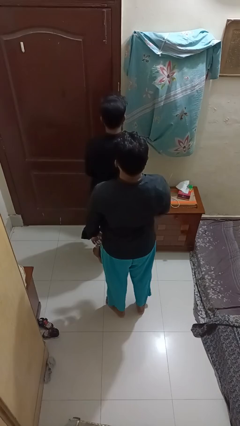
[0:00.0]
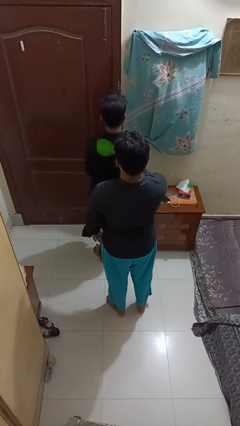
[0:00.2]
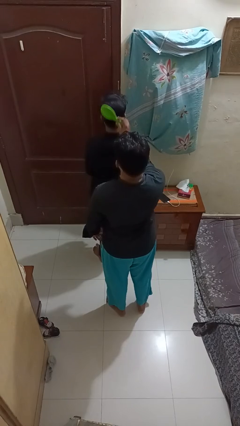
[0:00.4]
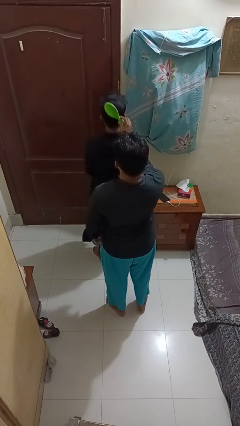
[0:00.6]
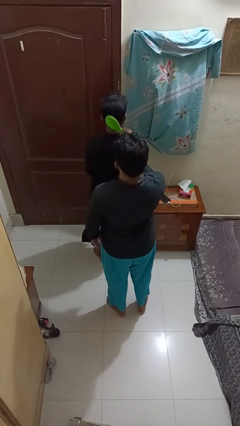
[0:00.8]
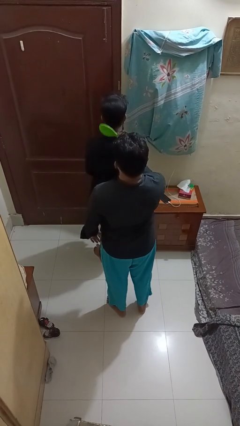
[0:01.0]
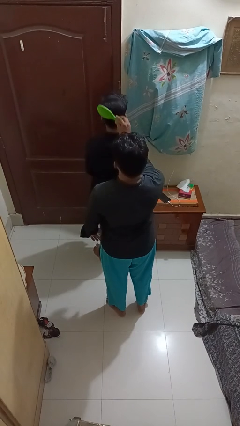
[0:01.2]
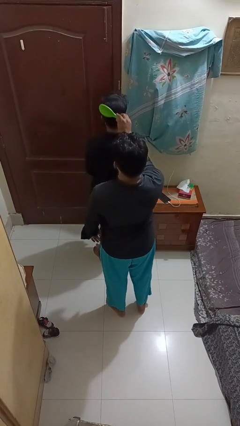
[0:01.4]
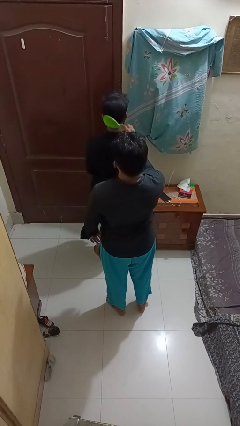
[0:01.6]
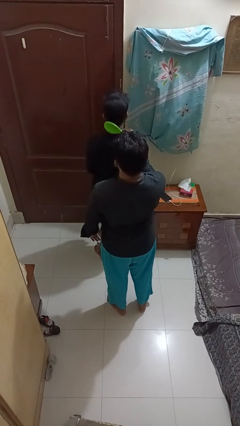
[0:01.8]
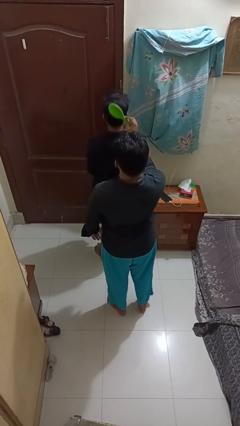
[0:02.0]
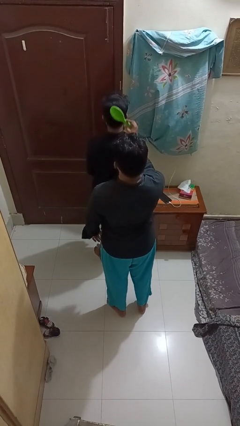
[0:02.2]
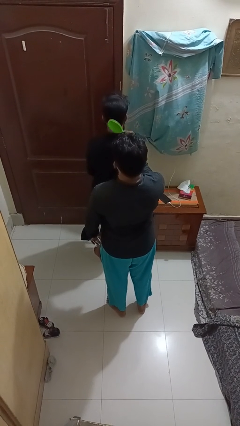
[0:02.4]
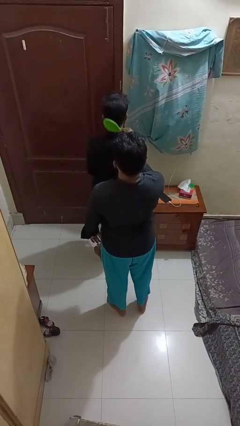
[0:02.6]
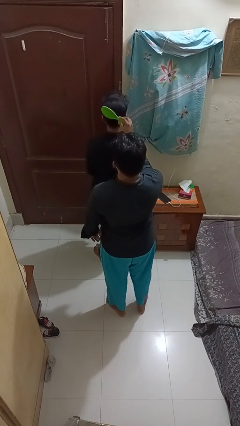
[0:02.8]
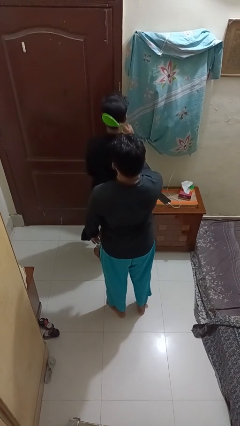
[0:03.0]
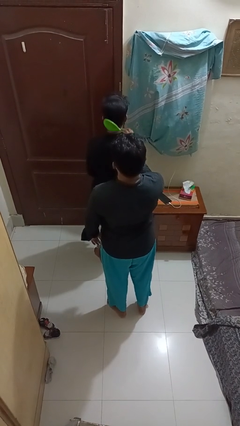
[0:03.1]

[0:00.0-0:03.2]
person brushes hair of person

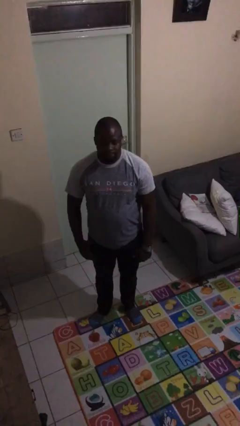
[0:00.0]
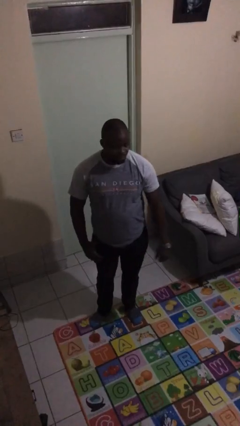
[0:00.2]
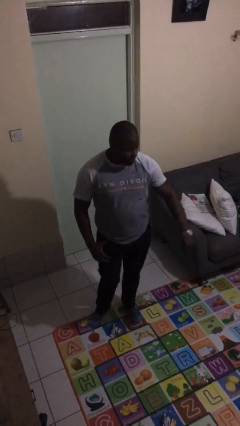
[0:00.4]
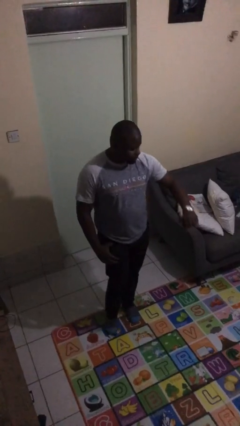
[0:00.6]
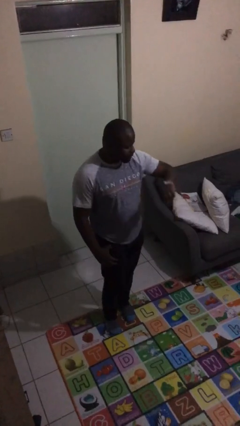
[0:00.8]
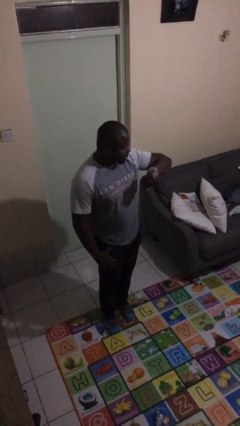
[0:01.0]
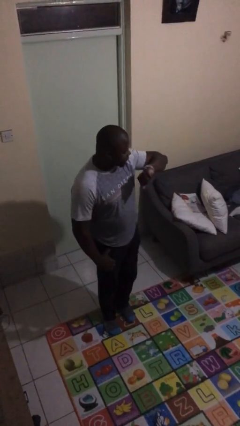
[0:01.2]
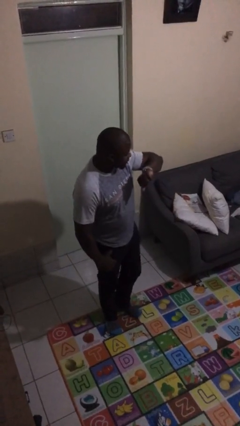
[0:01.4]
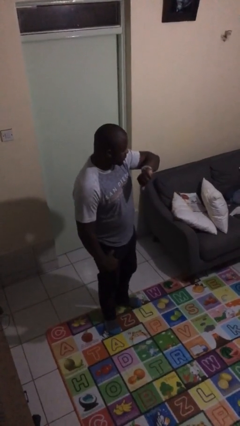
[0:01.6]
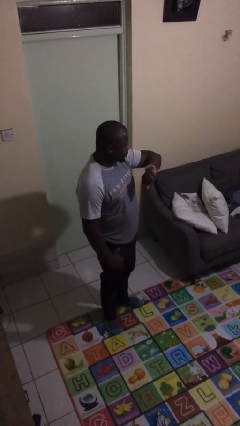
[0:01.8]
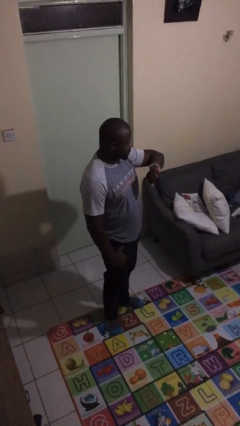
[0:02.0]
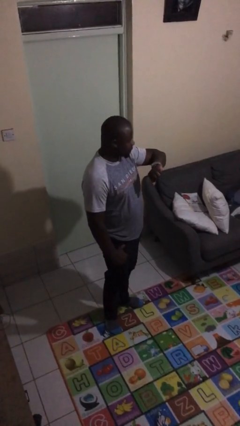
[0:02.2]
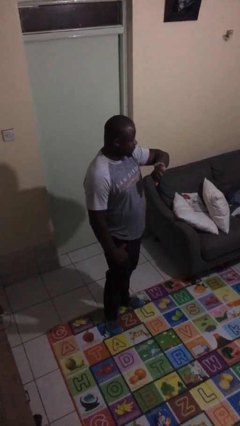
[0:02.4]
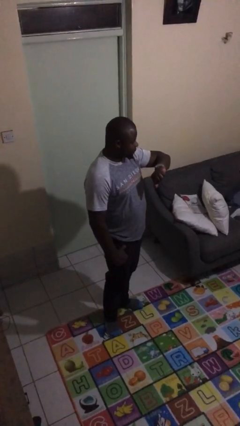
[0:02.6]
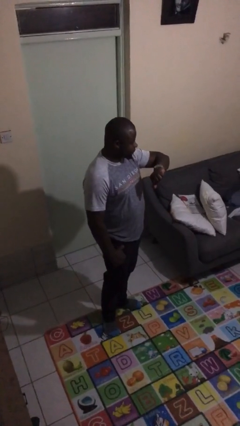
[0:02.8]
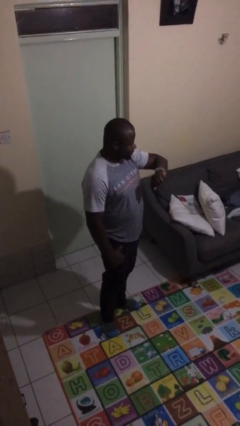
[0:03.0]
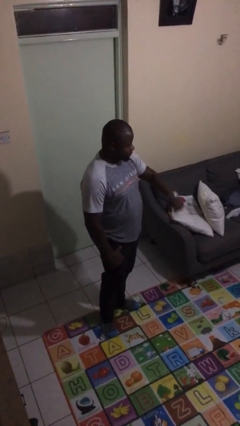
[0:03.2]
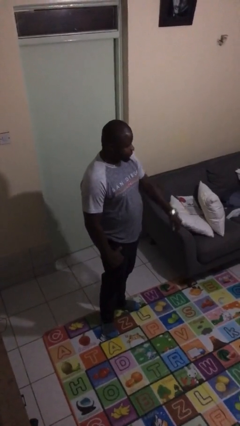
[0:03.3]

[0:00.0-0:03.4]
person looks at wristwatch

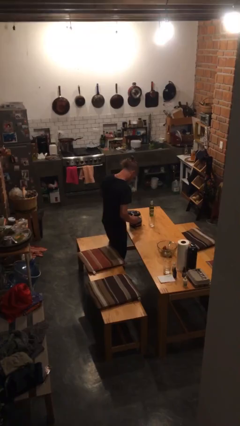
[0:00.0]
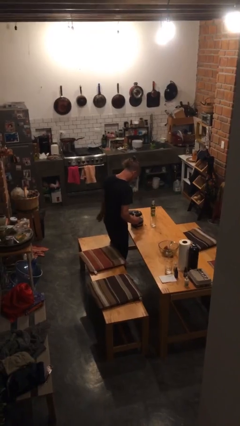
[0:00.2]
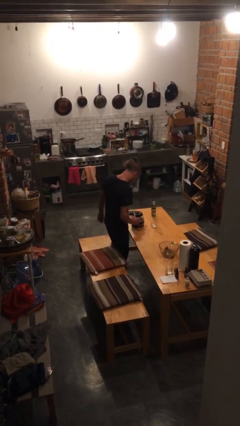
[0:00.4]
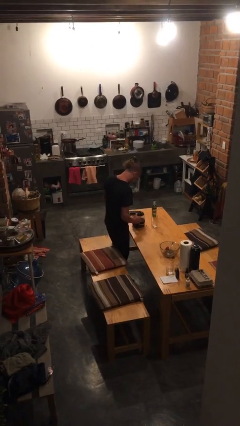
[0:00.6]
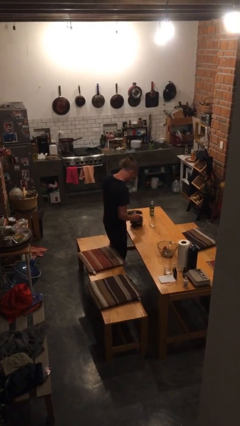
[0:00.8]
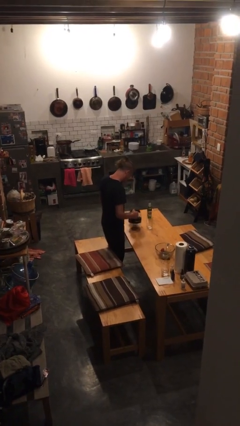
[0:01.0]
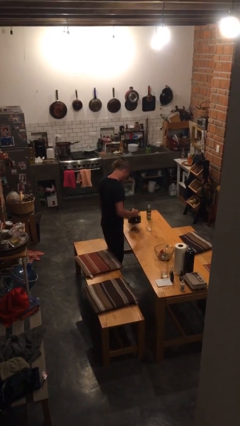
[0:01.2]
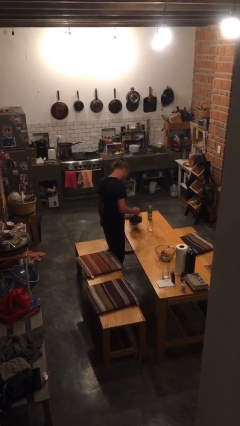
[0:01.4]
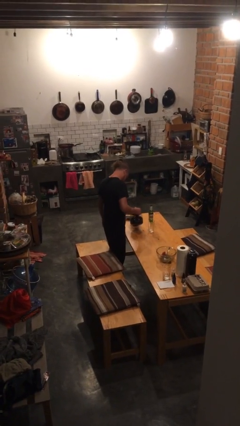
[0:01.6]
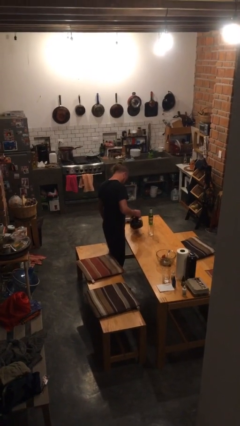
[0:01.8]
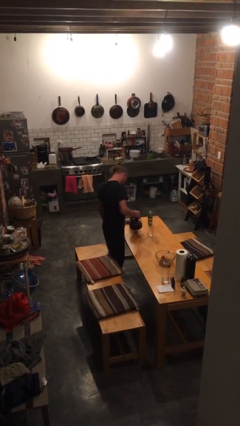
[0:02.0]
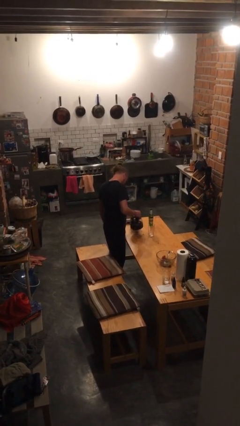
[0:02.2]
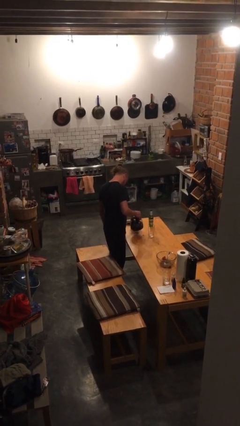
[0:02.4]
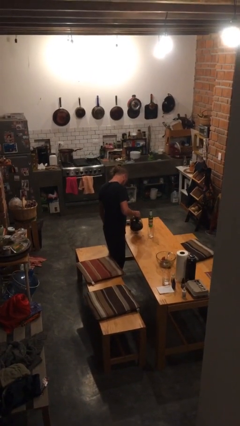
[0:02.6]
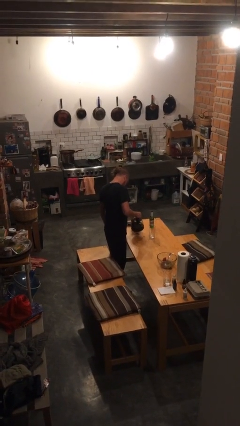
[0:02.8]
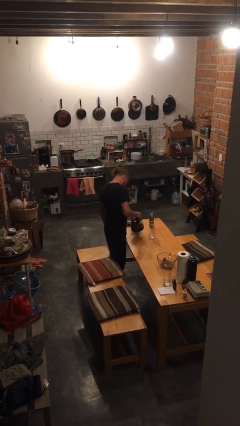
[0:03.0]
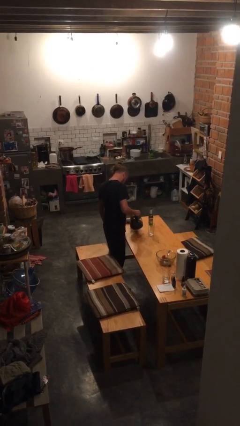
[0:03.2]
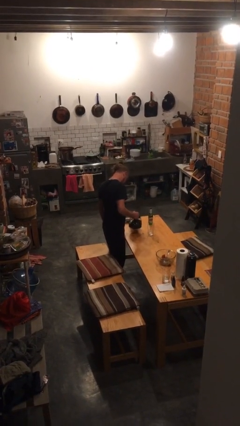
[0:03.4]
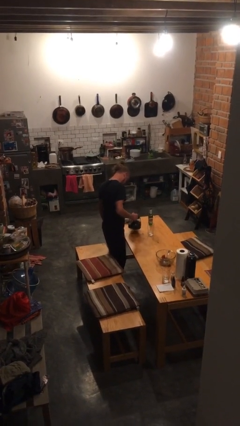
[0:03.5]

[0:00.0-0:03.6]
person pours coffee into mug

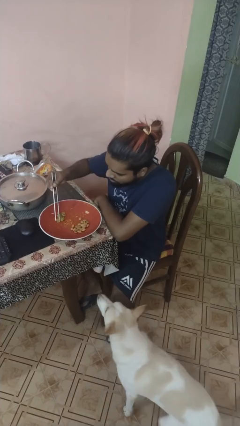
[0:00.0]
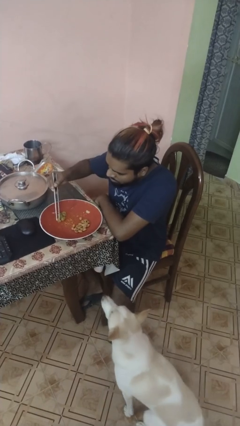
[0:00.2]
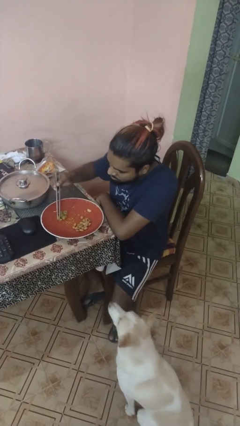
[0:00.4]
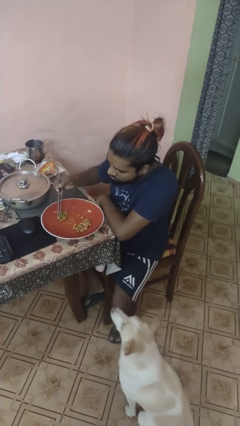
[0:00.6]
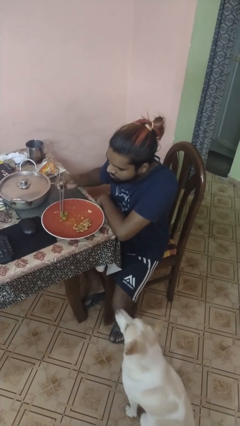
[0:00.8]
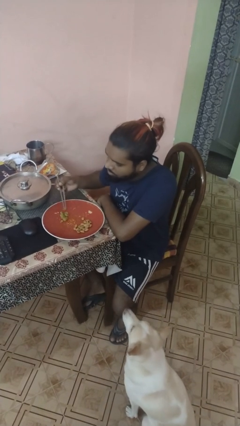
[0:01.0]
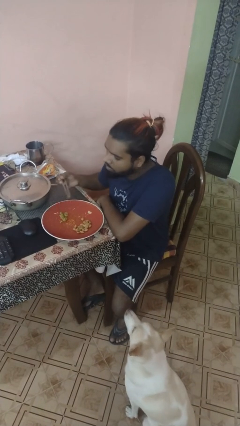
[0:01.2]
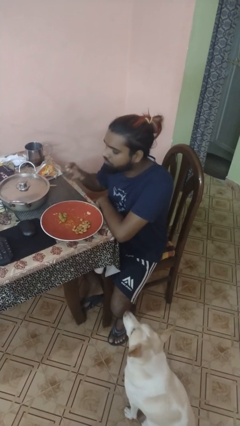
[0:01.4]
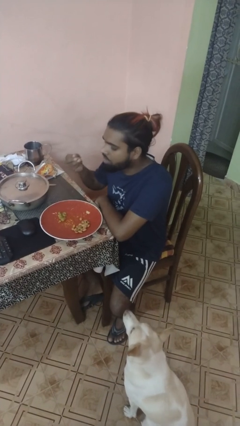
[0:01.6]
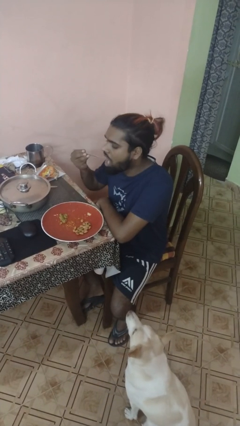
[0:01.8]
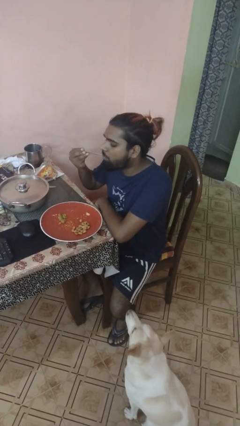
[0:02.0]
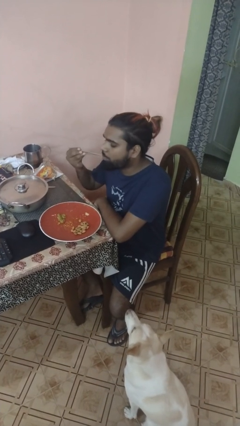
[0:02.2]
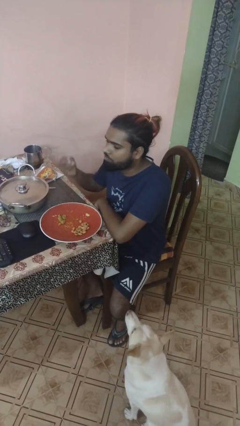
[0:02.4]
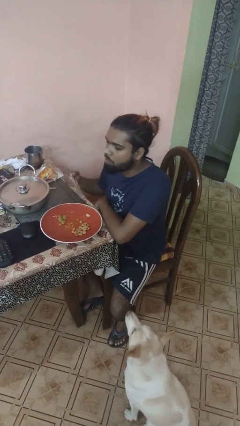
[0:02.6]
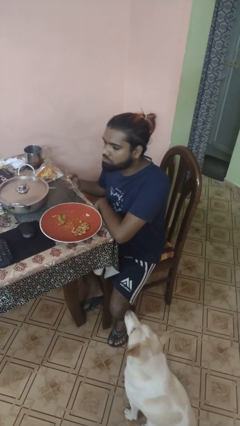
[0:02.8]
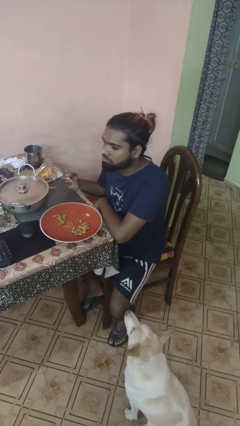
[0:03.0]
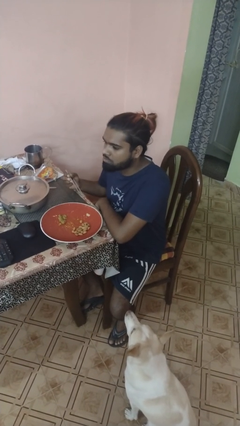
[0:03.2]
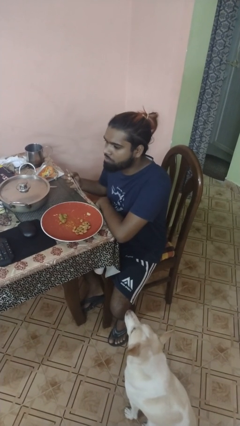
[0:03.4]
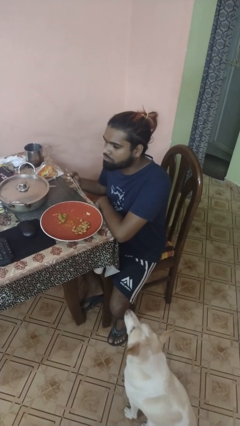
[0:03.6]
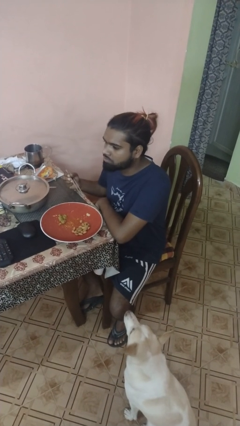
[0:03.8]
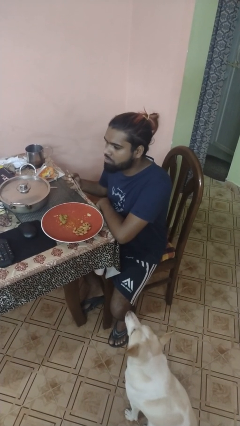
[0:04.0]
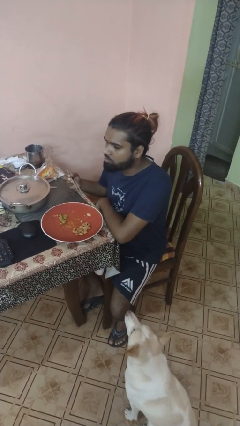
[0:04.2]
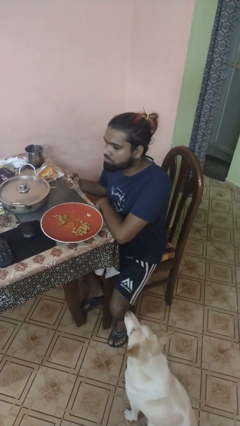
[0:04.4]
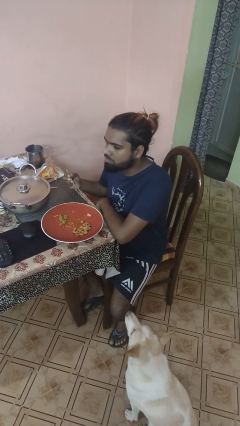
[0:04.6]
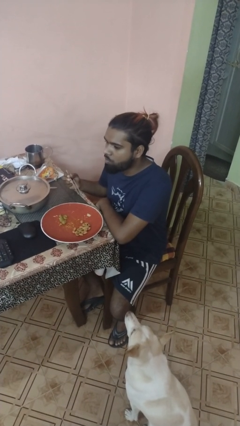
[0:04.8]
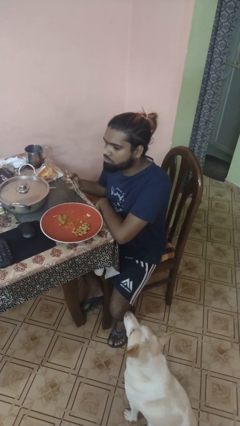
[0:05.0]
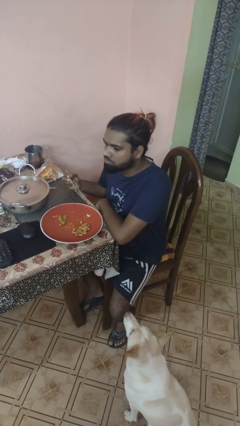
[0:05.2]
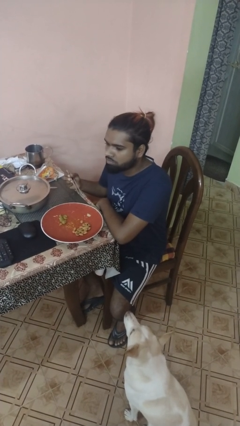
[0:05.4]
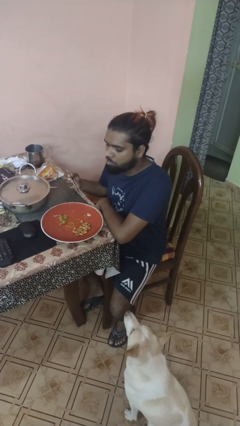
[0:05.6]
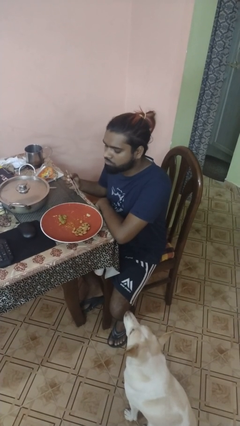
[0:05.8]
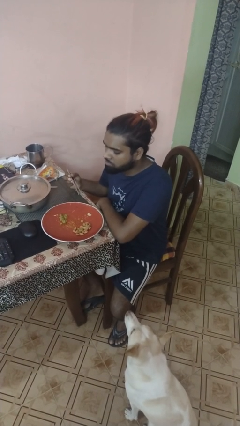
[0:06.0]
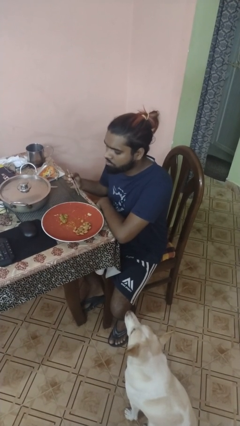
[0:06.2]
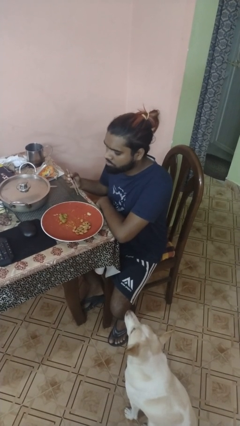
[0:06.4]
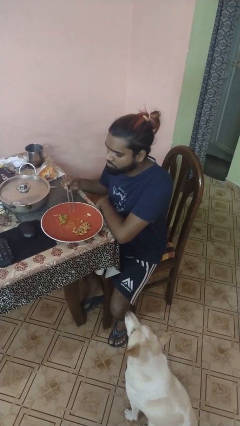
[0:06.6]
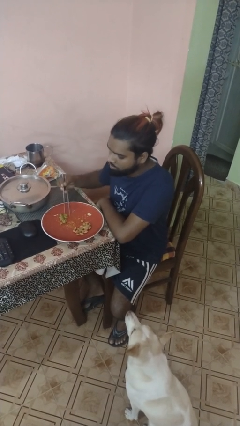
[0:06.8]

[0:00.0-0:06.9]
person eats with utensil

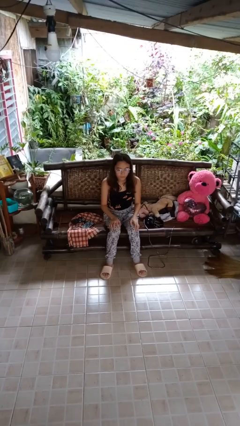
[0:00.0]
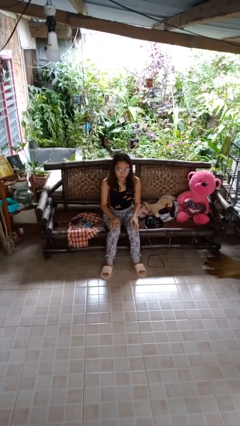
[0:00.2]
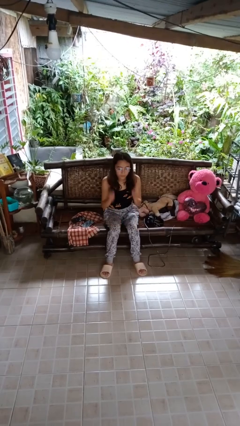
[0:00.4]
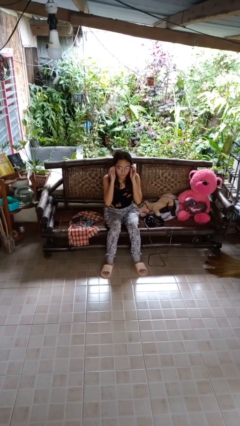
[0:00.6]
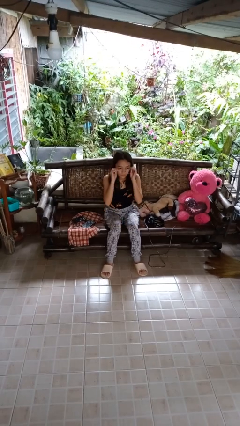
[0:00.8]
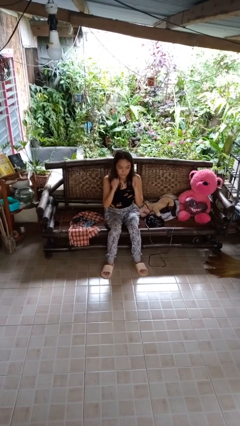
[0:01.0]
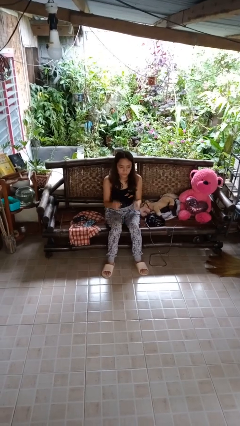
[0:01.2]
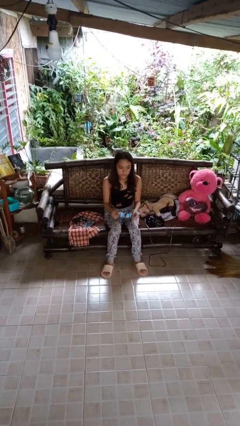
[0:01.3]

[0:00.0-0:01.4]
person takes off glasses
